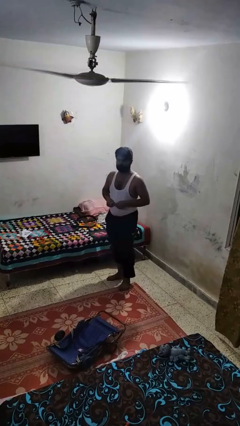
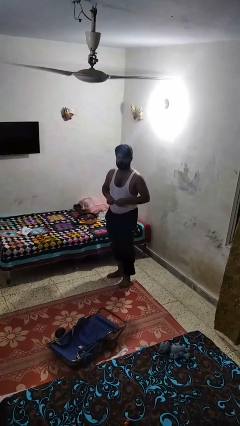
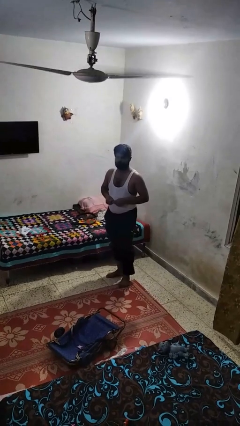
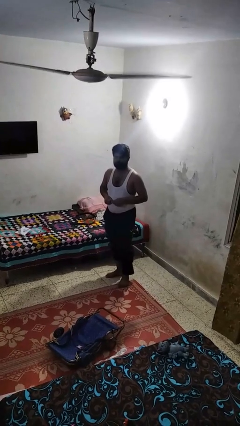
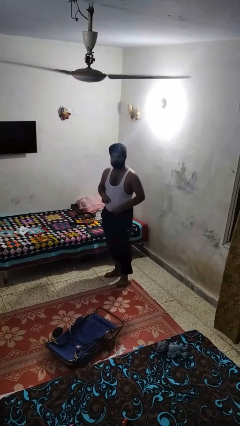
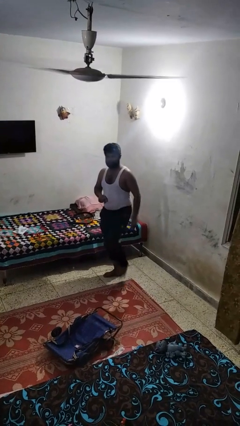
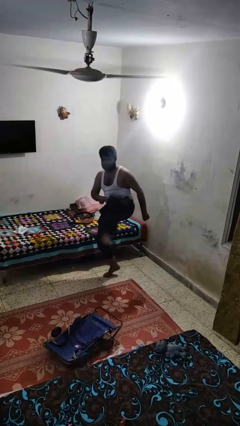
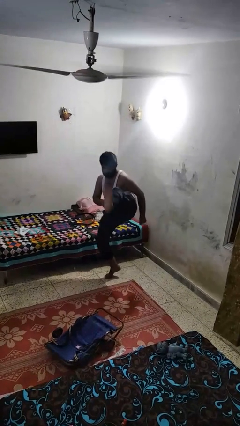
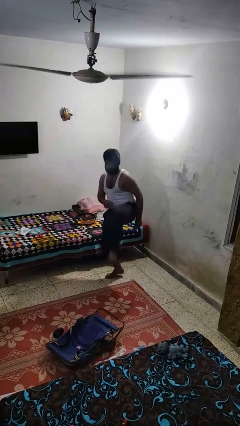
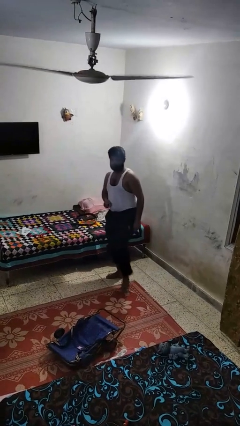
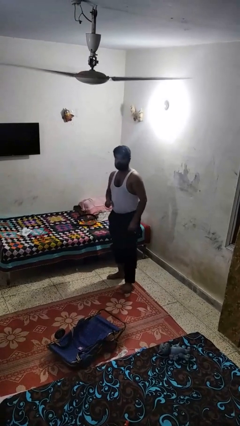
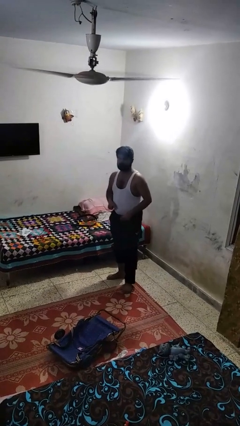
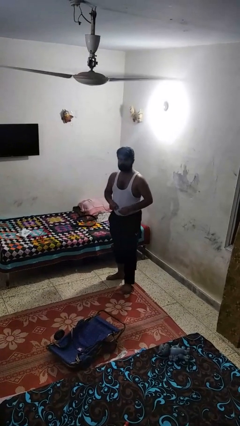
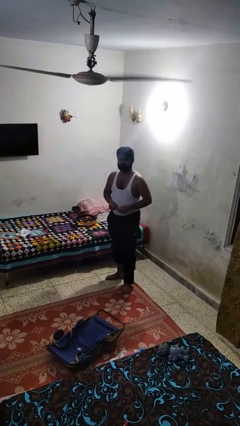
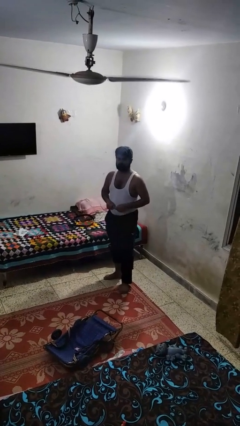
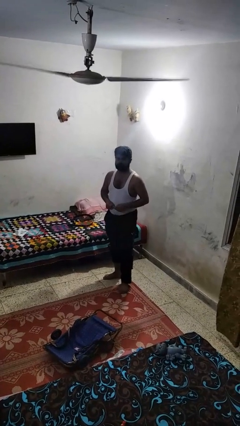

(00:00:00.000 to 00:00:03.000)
person karate kicks

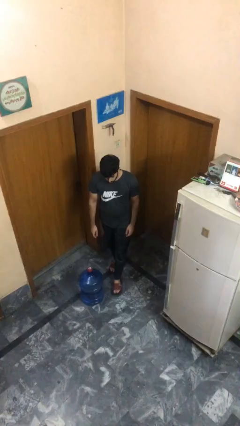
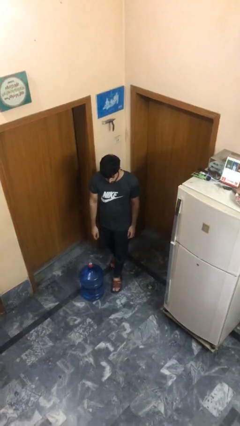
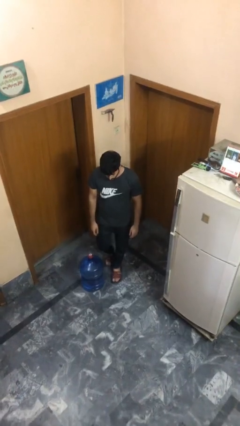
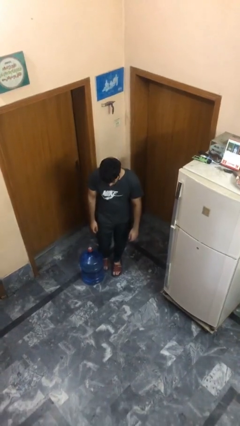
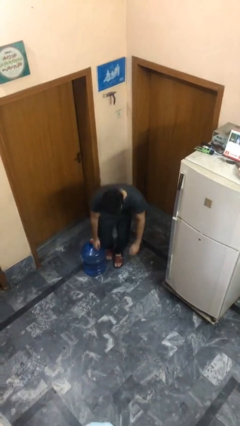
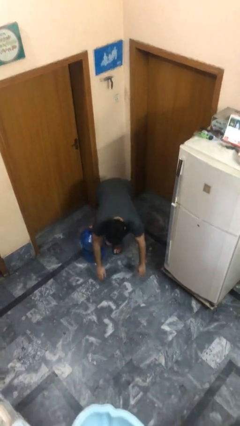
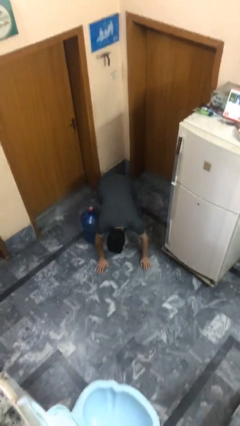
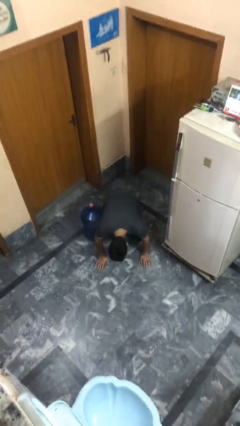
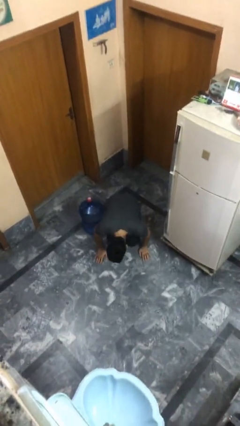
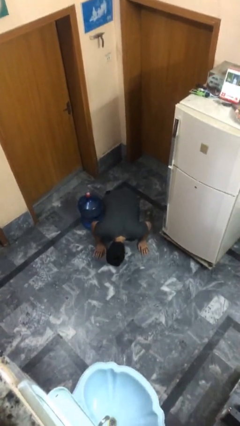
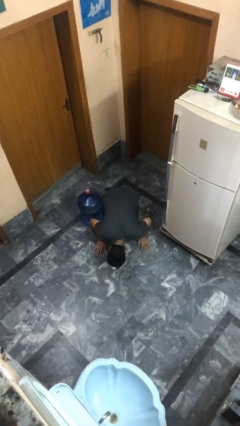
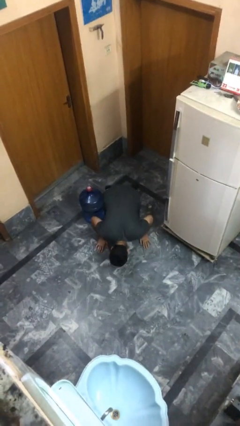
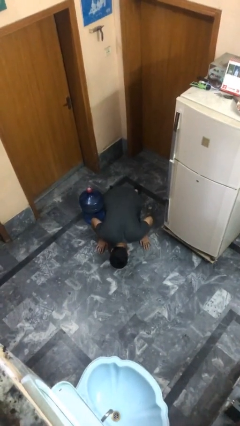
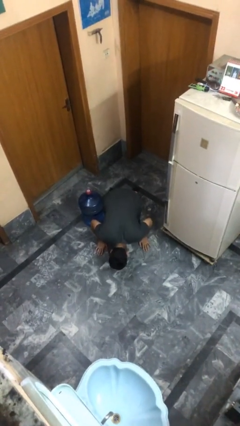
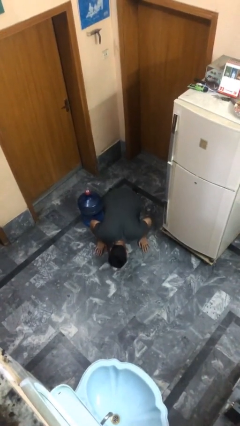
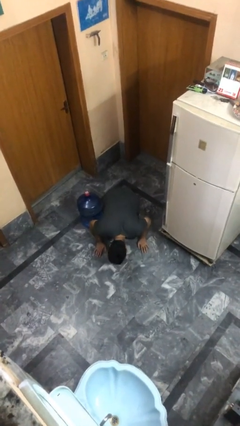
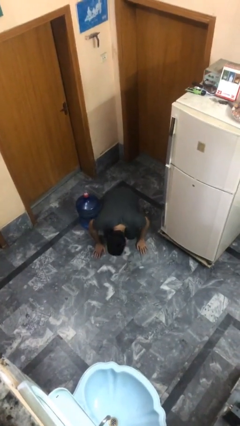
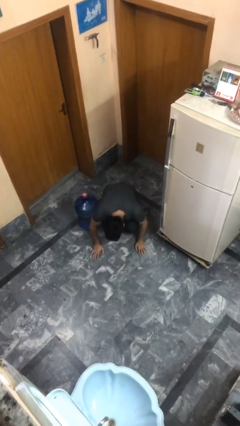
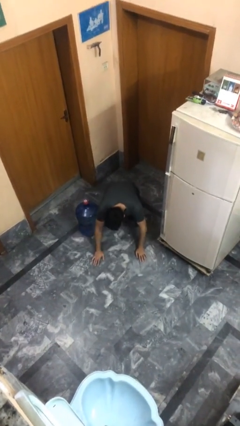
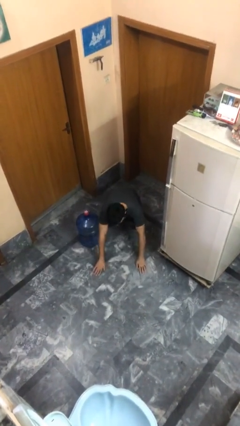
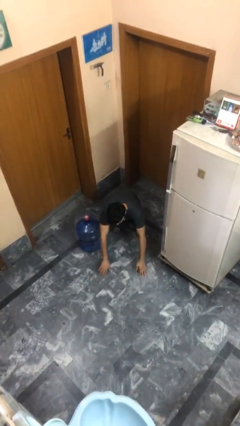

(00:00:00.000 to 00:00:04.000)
person trips on object on floor

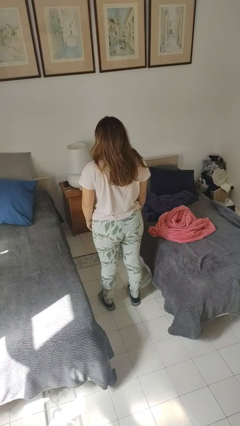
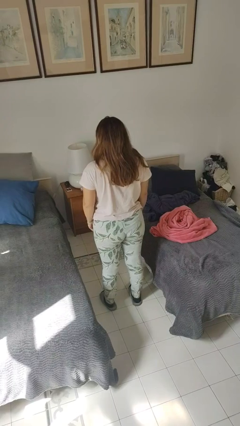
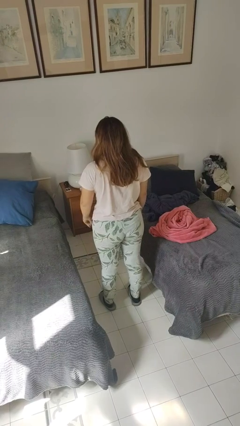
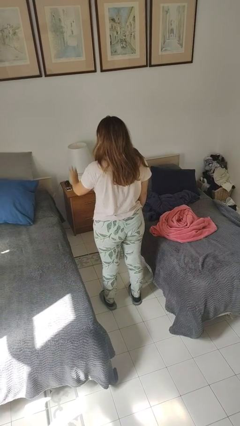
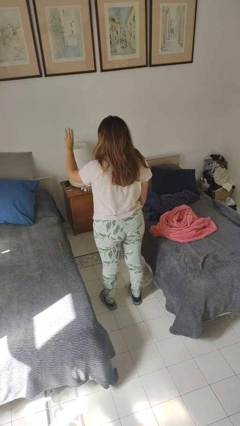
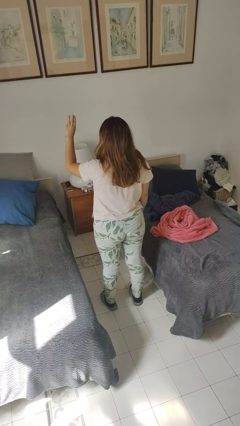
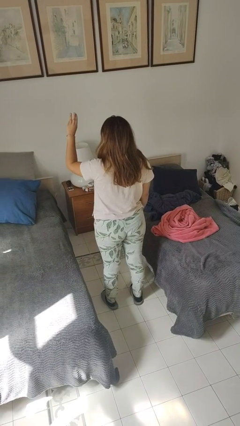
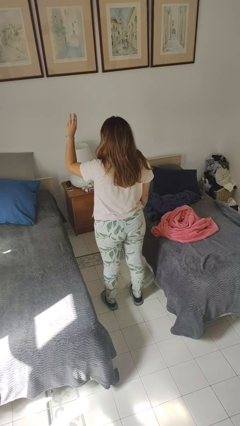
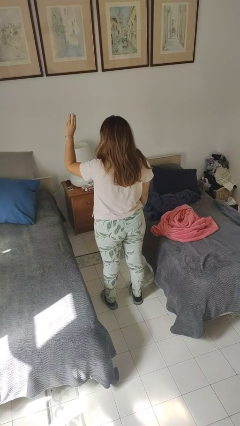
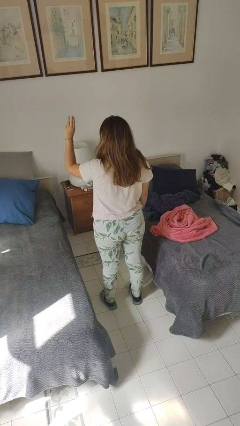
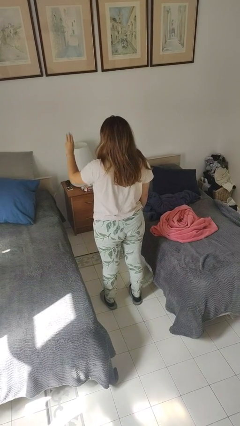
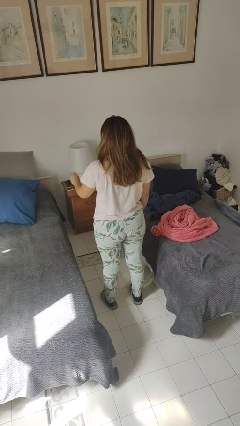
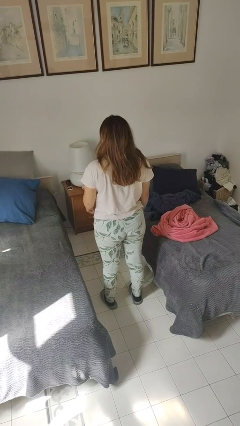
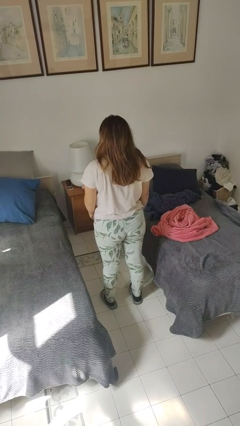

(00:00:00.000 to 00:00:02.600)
person gestures number three

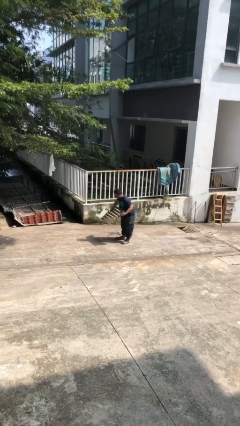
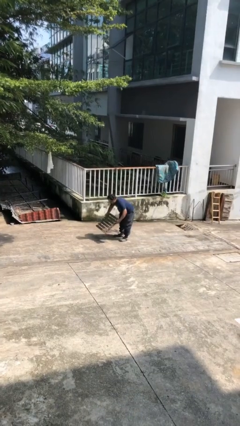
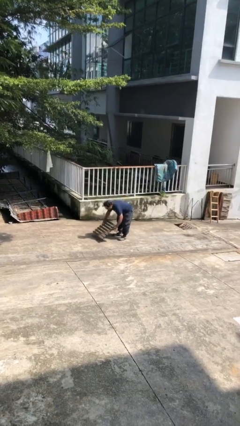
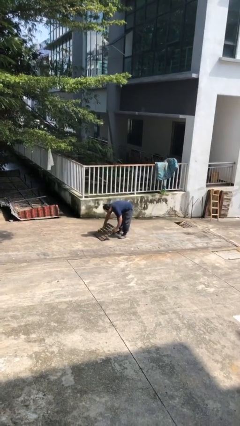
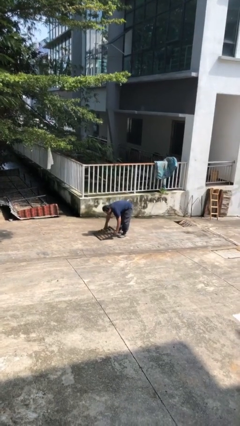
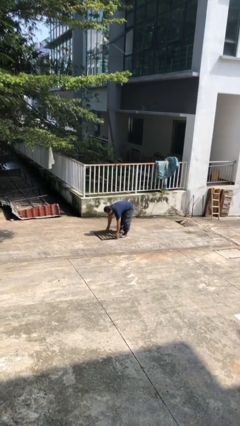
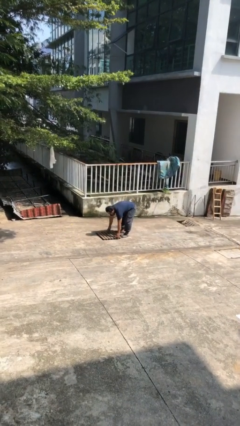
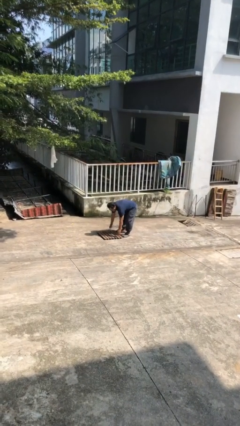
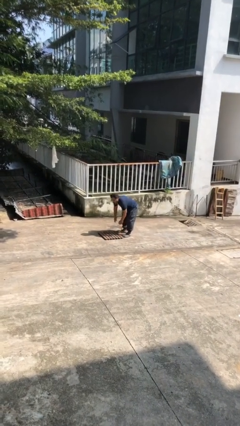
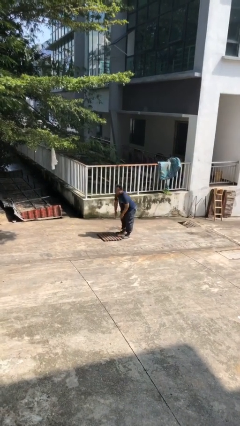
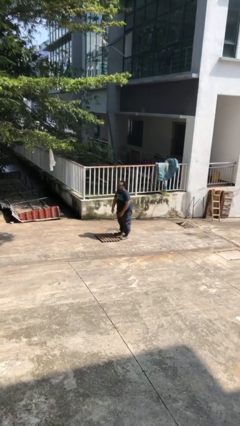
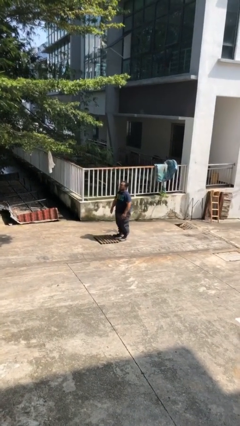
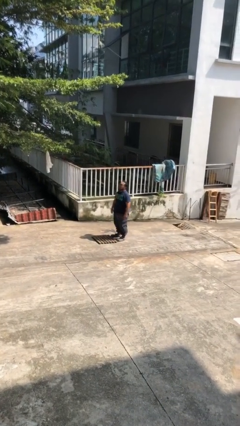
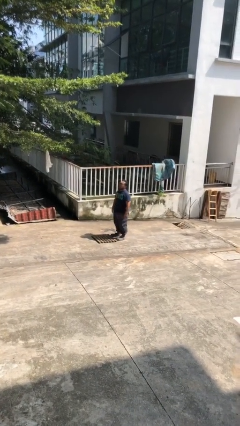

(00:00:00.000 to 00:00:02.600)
person puts down object on floor

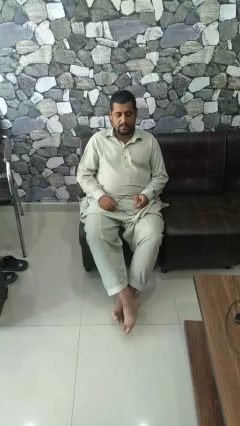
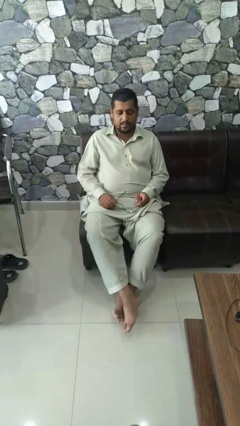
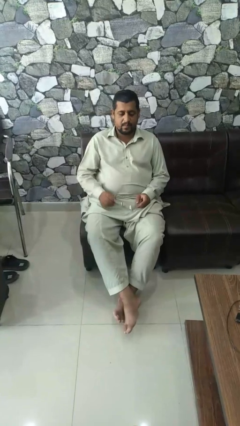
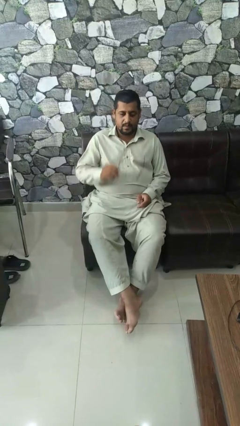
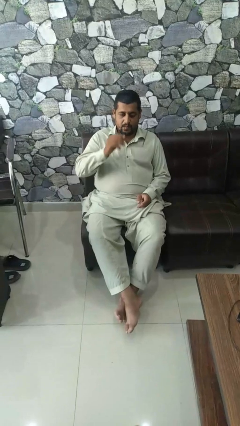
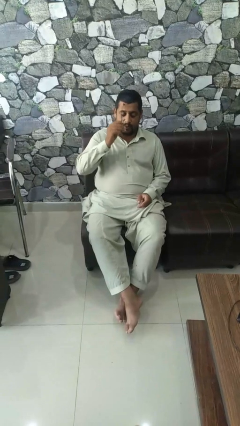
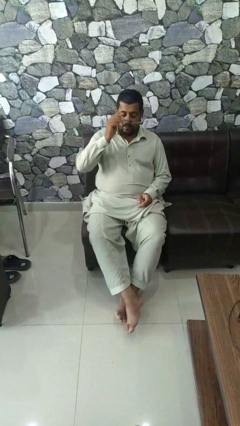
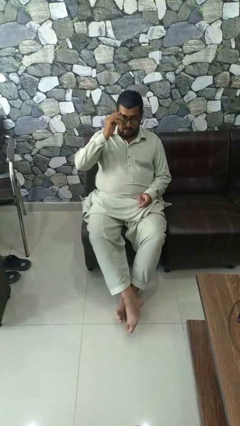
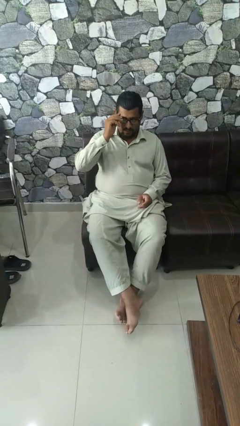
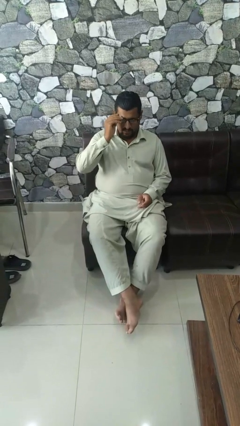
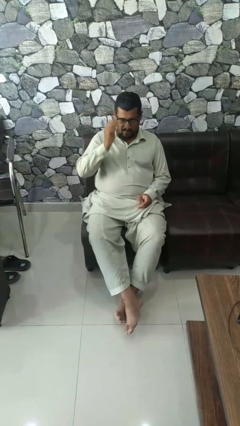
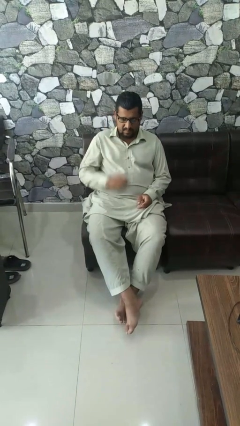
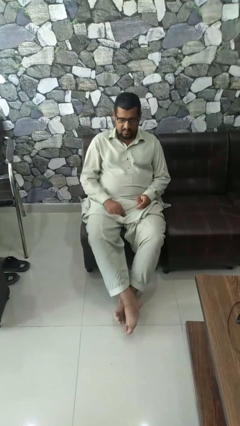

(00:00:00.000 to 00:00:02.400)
person puts on glasses

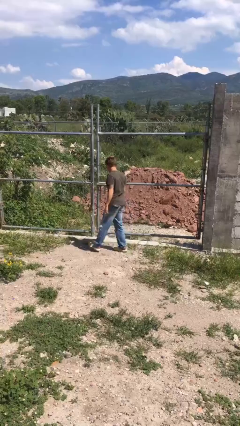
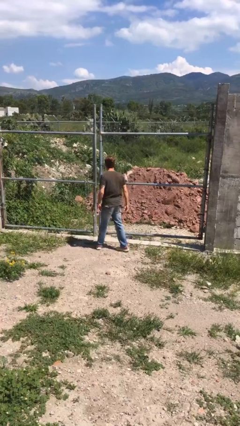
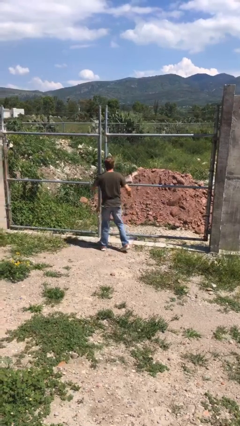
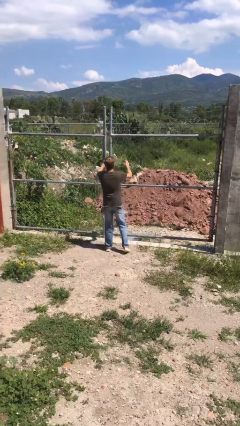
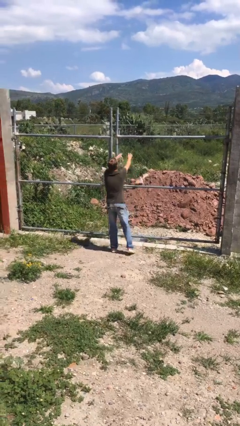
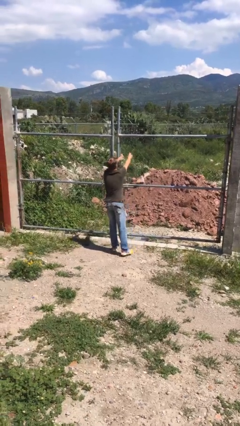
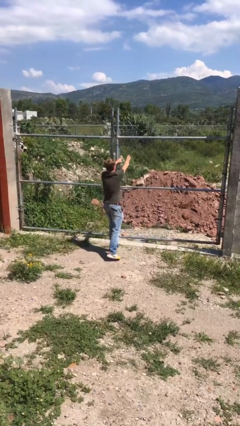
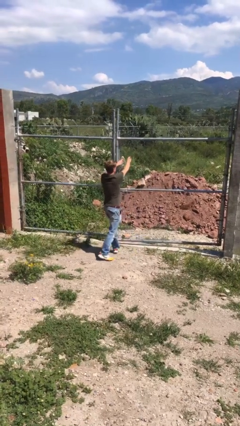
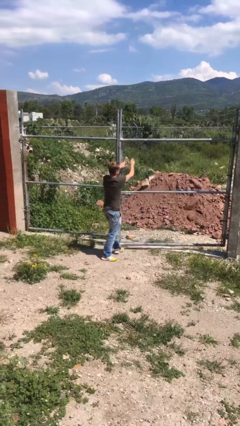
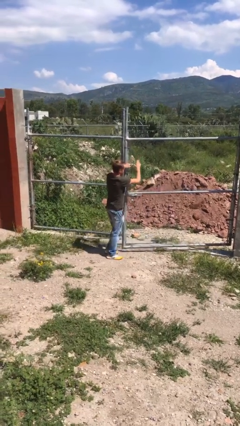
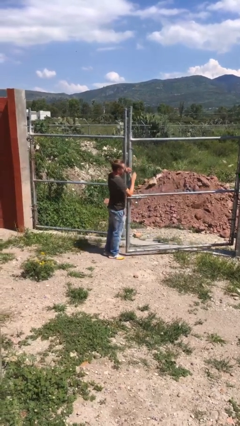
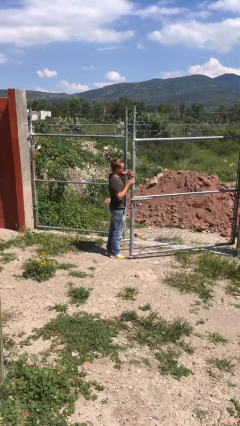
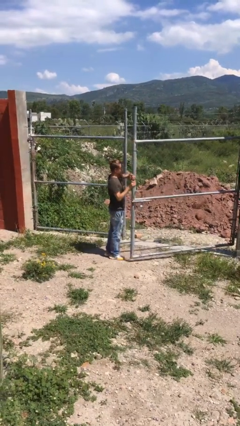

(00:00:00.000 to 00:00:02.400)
person opens gate
